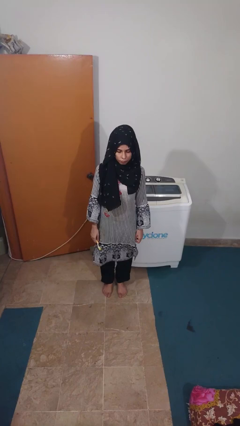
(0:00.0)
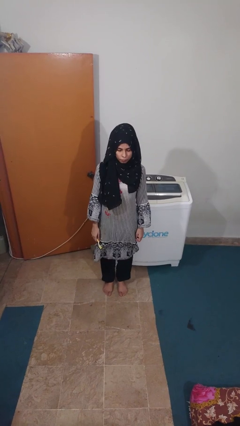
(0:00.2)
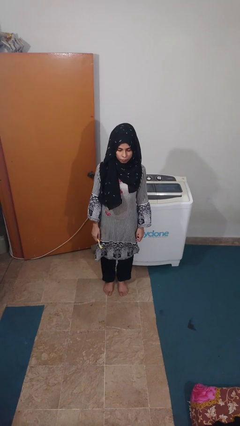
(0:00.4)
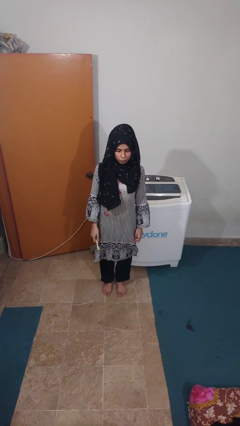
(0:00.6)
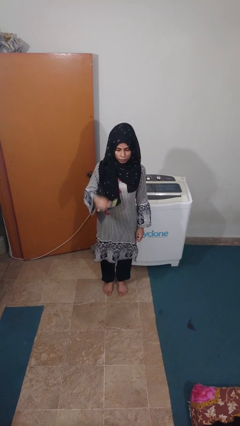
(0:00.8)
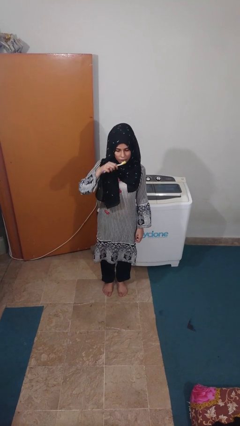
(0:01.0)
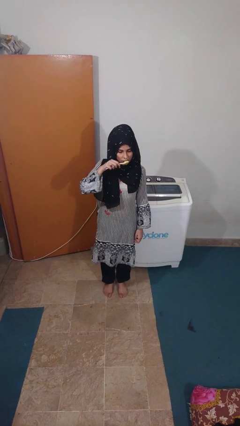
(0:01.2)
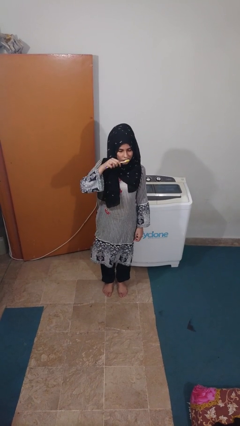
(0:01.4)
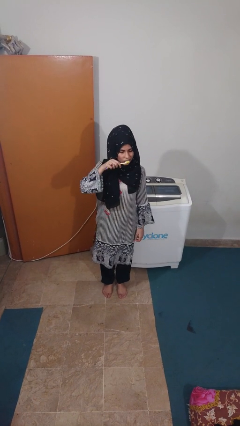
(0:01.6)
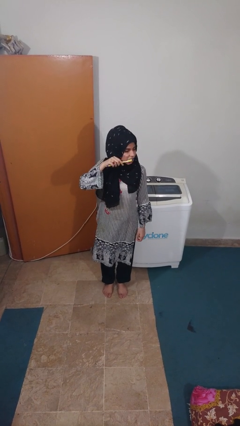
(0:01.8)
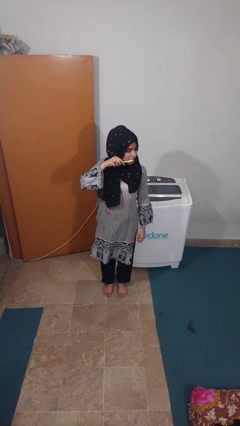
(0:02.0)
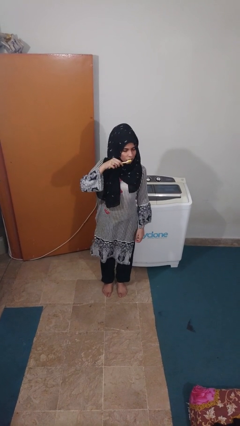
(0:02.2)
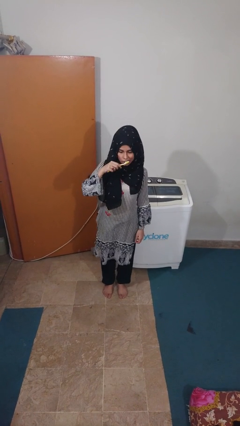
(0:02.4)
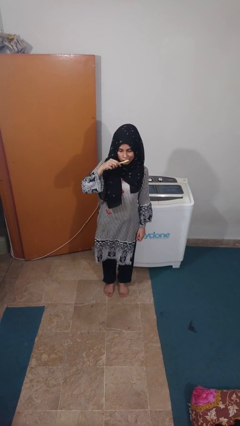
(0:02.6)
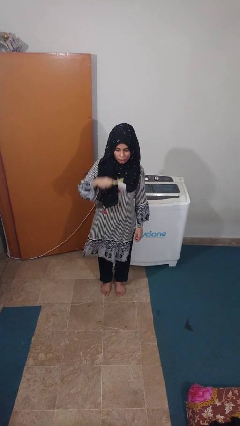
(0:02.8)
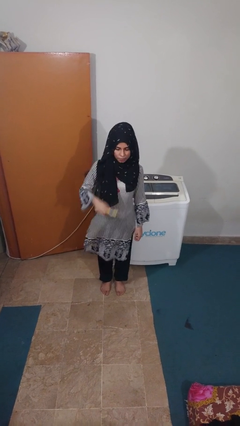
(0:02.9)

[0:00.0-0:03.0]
person brushes teeth

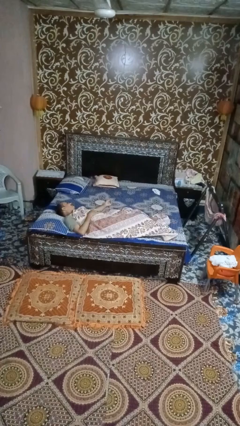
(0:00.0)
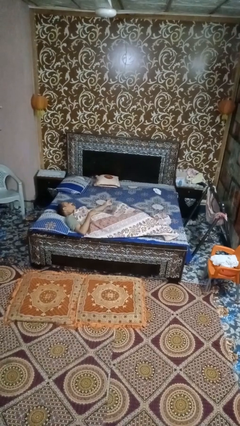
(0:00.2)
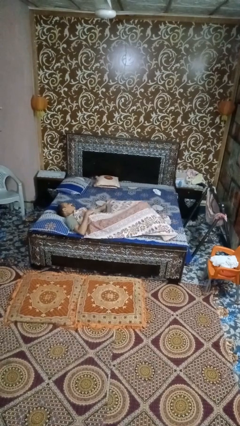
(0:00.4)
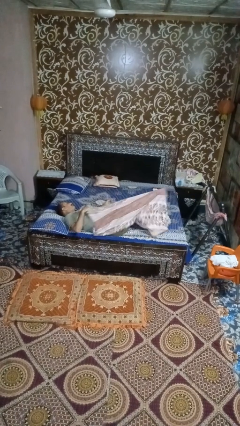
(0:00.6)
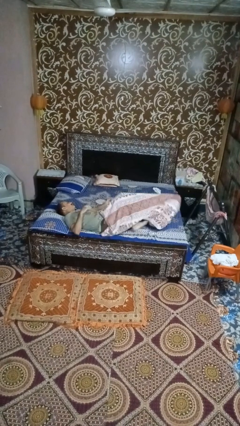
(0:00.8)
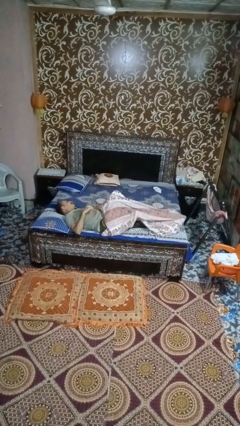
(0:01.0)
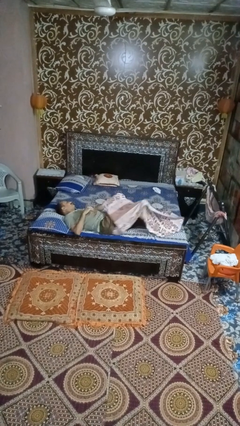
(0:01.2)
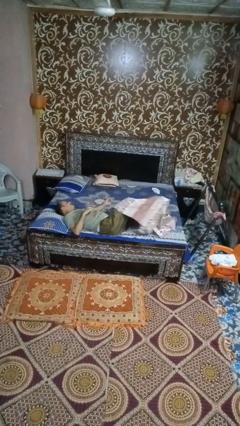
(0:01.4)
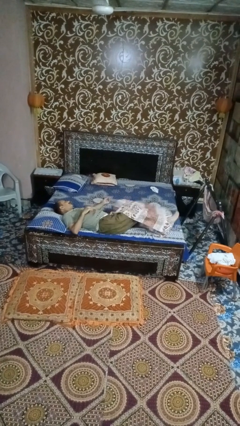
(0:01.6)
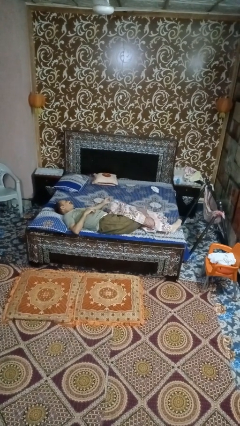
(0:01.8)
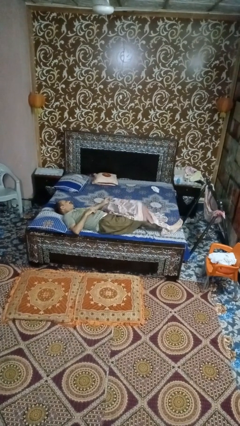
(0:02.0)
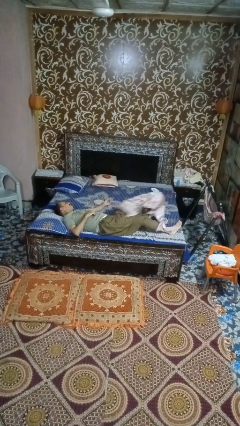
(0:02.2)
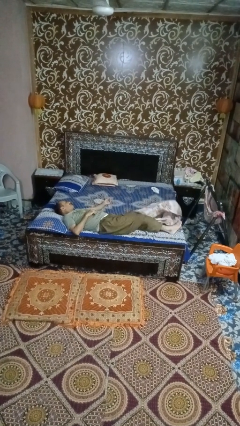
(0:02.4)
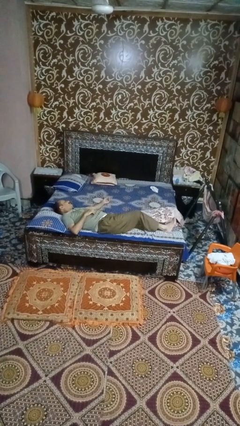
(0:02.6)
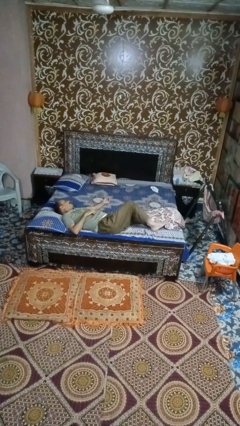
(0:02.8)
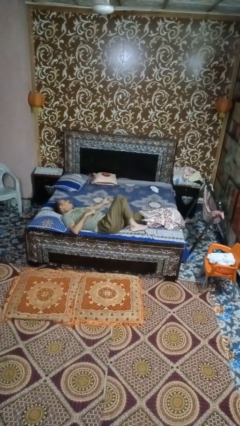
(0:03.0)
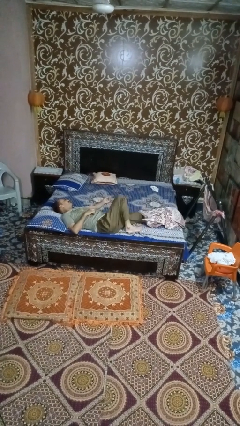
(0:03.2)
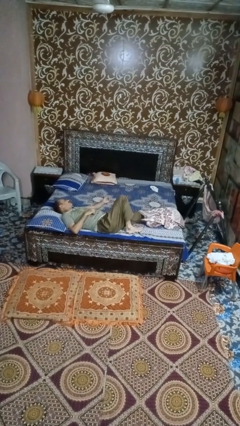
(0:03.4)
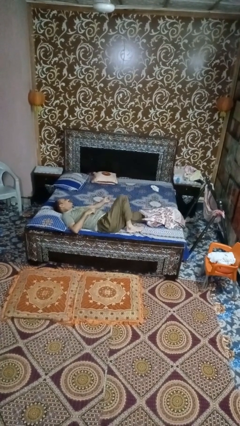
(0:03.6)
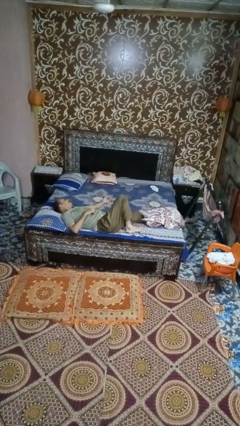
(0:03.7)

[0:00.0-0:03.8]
person uncovers with bedsheets

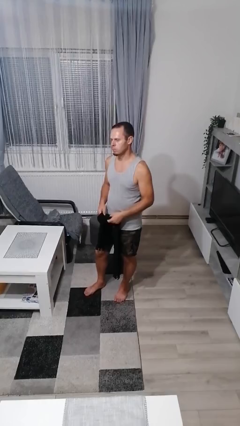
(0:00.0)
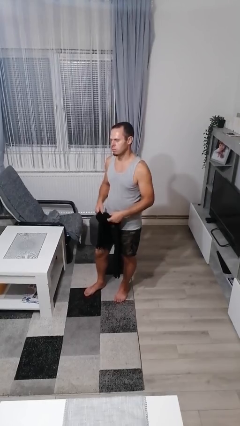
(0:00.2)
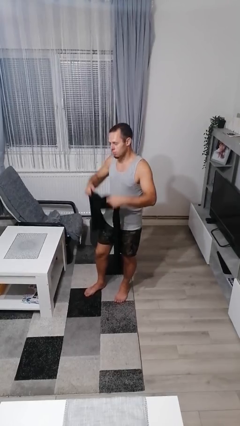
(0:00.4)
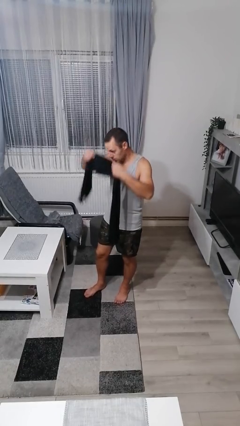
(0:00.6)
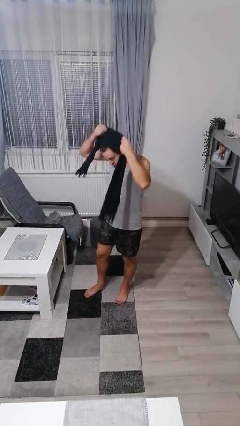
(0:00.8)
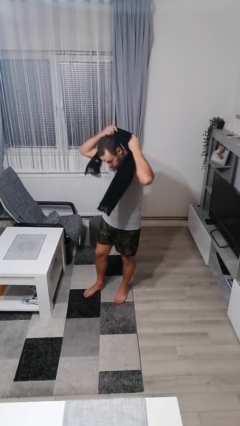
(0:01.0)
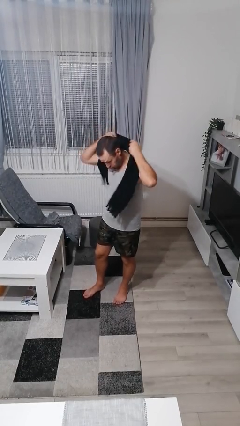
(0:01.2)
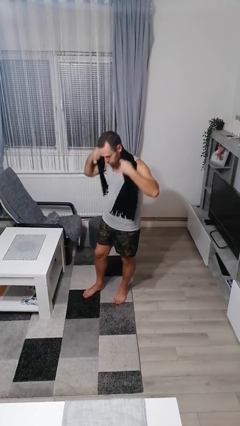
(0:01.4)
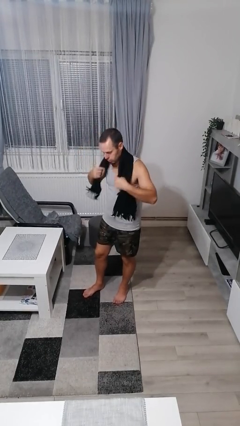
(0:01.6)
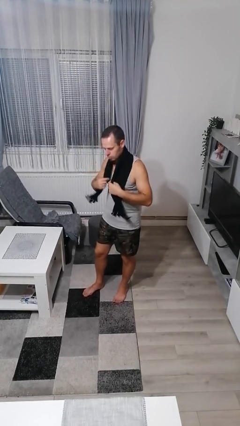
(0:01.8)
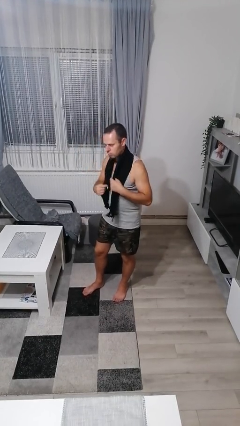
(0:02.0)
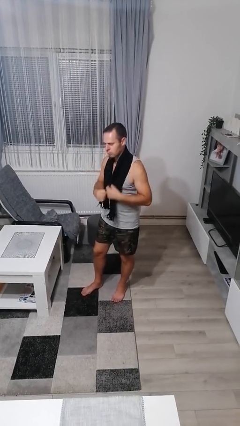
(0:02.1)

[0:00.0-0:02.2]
person puts on scarf

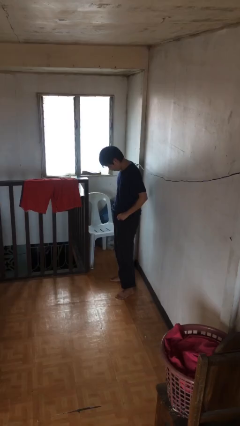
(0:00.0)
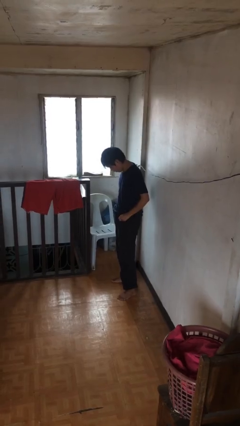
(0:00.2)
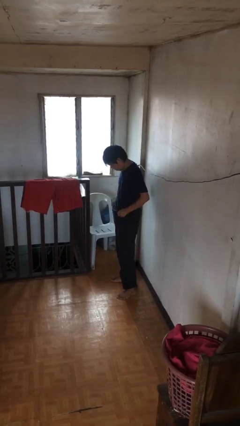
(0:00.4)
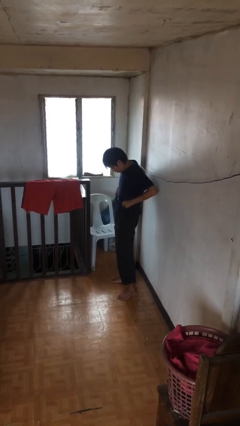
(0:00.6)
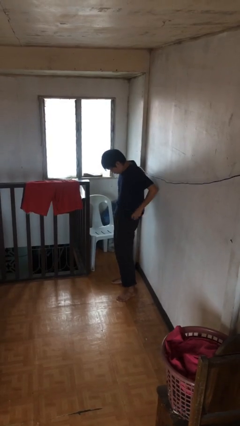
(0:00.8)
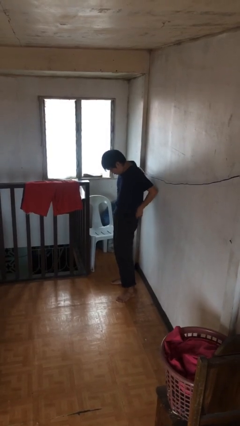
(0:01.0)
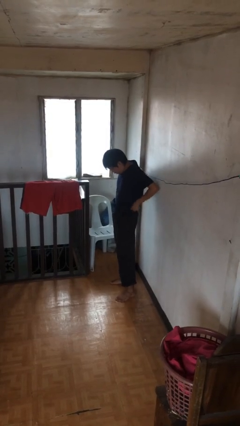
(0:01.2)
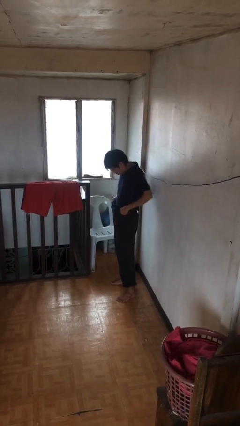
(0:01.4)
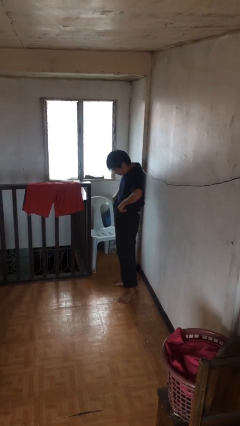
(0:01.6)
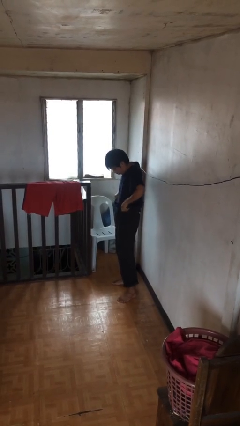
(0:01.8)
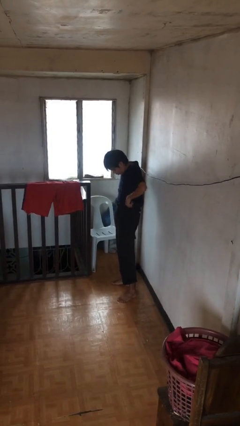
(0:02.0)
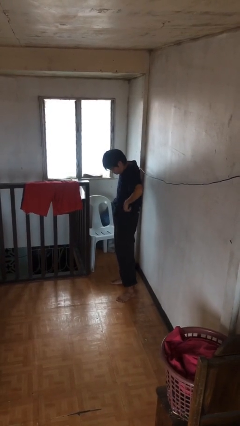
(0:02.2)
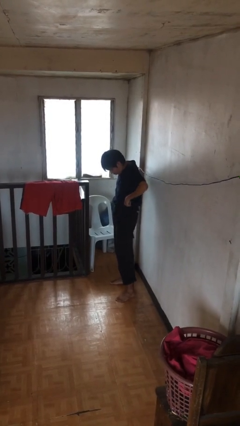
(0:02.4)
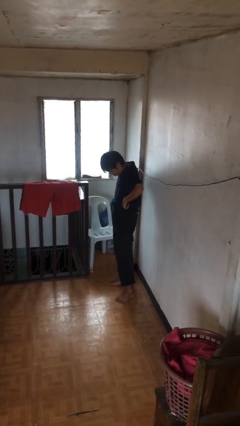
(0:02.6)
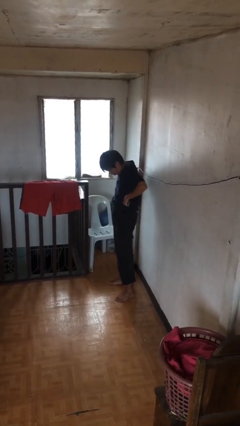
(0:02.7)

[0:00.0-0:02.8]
person hikes up pants

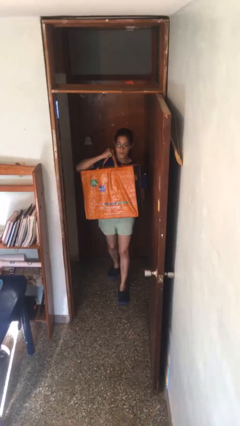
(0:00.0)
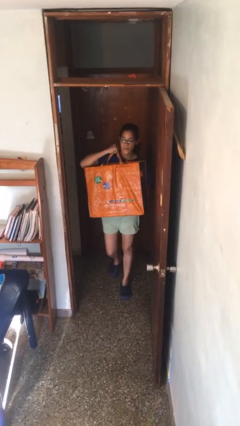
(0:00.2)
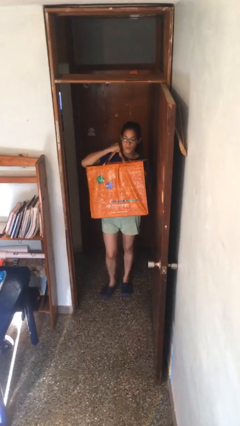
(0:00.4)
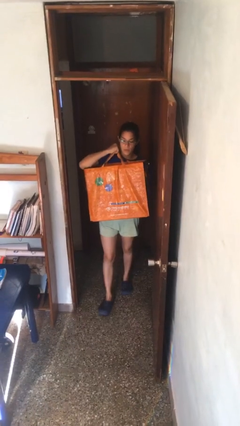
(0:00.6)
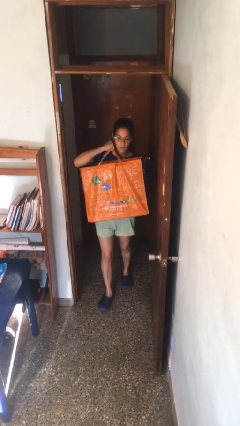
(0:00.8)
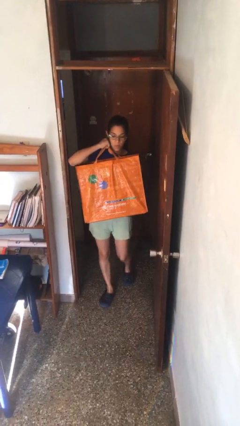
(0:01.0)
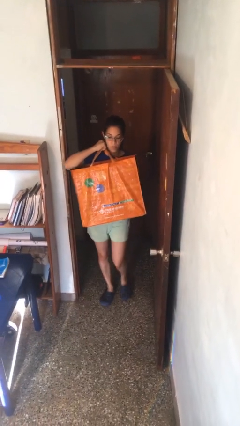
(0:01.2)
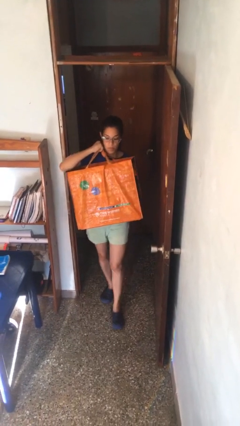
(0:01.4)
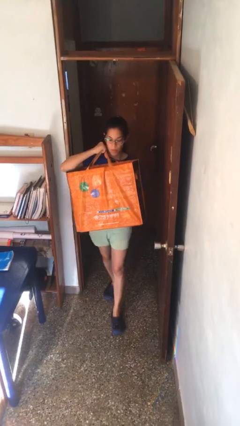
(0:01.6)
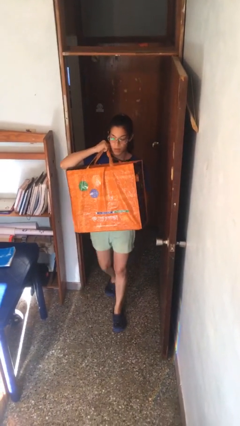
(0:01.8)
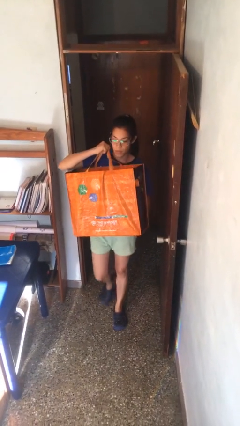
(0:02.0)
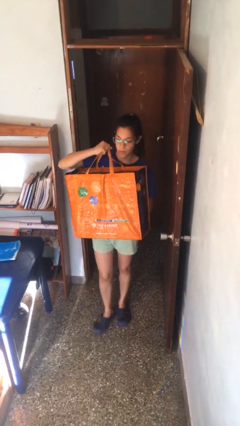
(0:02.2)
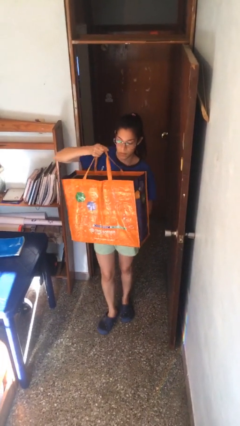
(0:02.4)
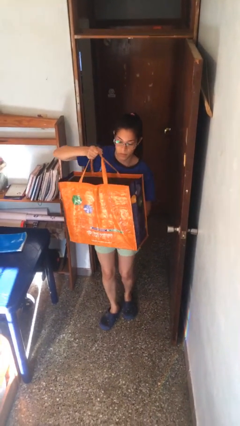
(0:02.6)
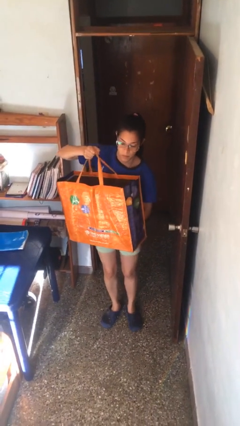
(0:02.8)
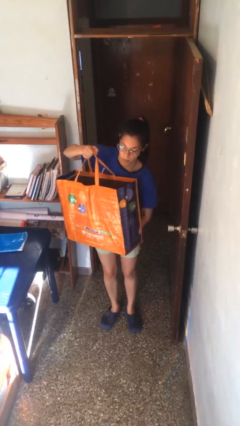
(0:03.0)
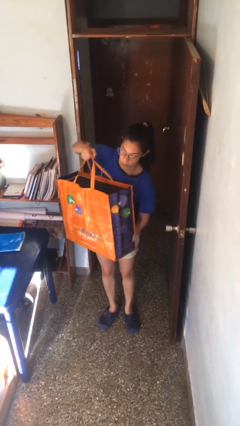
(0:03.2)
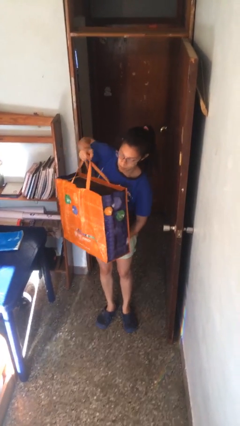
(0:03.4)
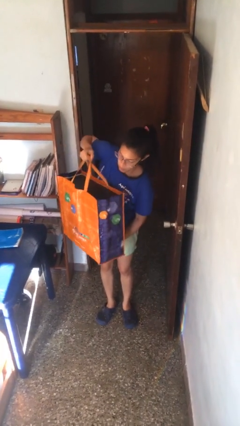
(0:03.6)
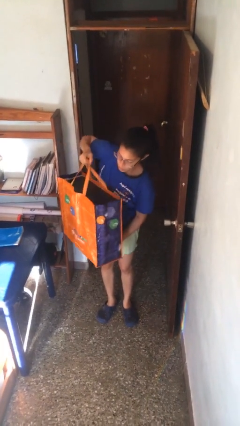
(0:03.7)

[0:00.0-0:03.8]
person carries heavy object

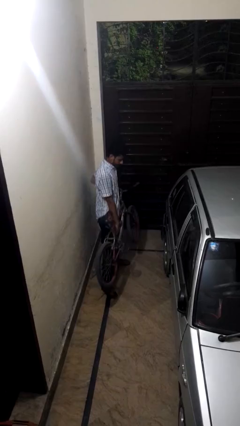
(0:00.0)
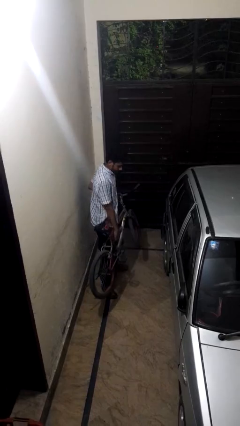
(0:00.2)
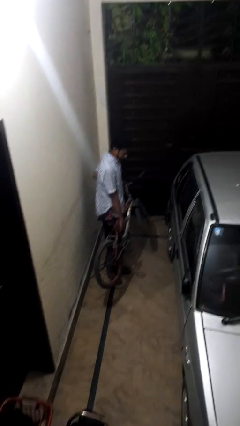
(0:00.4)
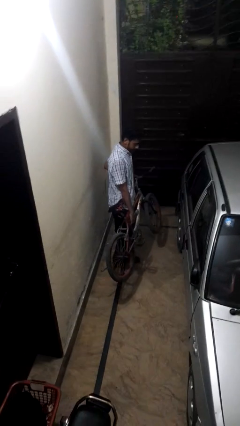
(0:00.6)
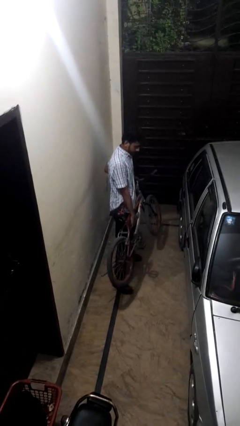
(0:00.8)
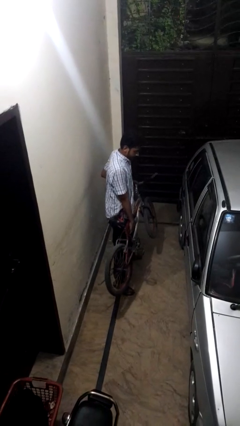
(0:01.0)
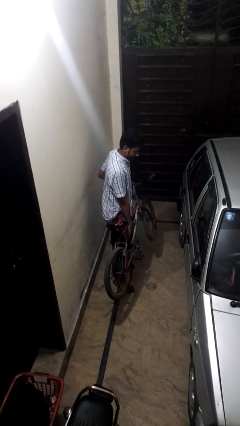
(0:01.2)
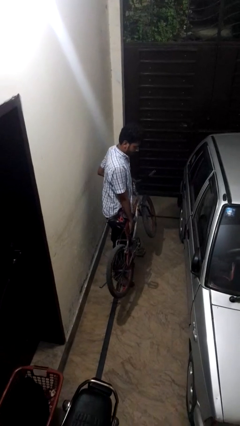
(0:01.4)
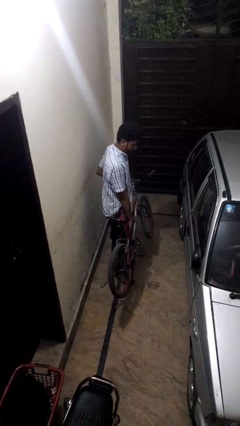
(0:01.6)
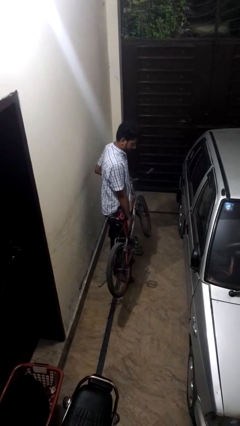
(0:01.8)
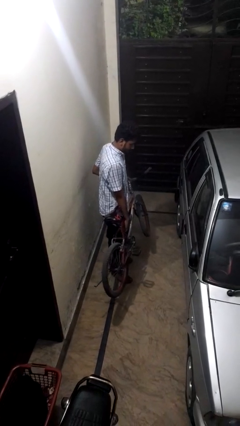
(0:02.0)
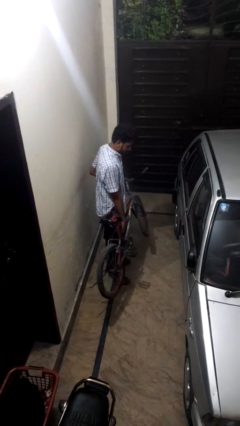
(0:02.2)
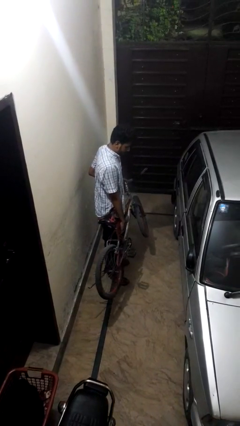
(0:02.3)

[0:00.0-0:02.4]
person carries groceries
